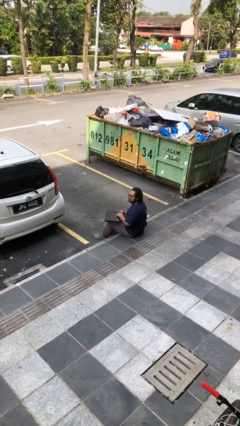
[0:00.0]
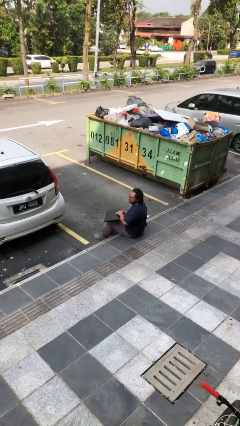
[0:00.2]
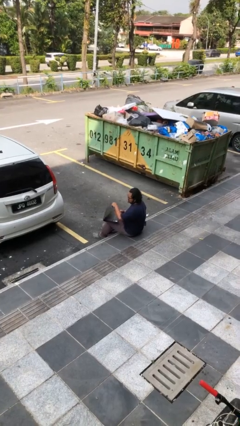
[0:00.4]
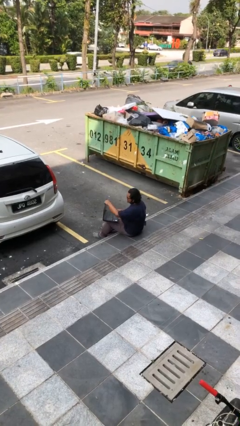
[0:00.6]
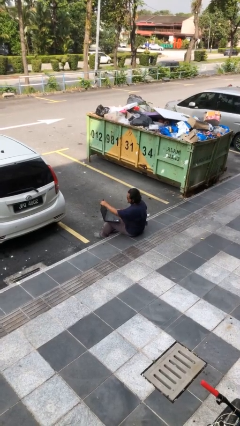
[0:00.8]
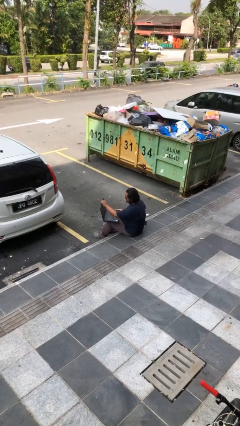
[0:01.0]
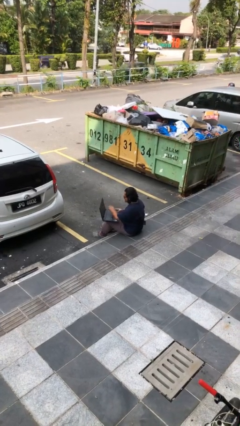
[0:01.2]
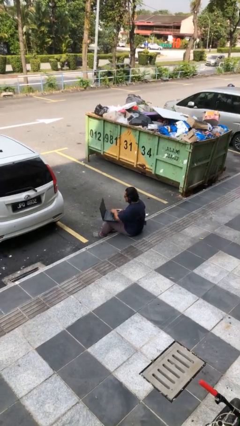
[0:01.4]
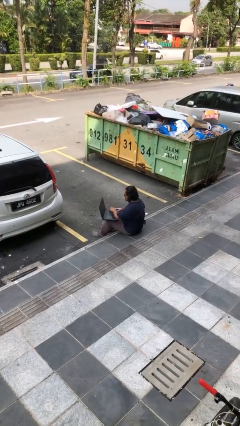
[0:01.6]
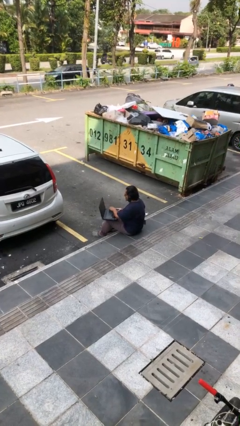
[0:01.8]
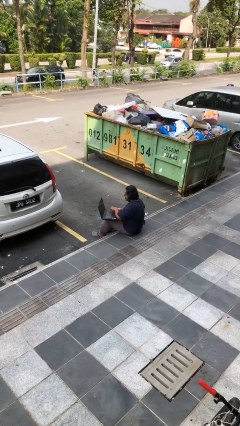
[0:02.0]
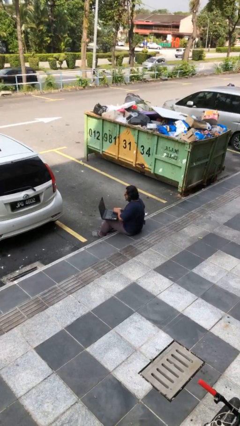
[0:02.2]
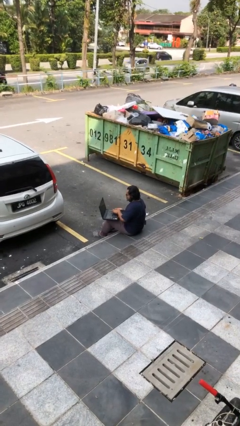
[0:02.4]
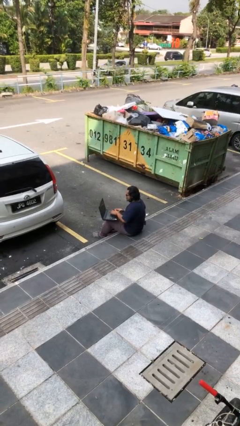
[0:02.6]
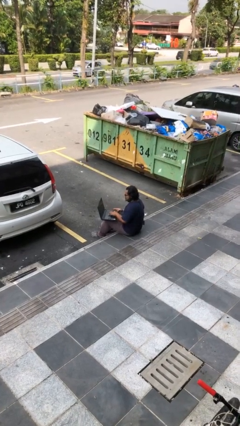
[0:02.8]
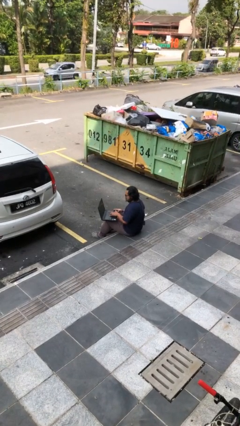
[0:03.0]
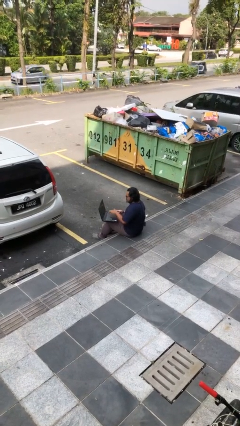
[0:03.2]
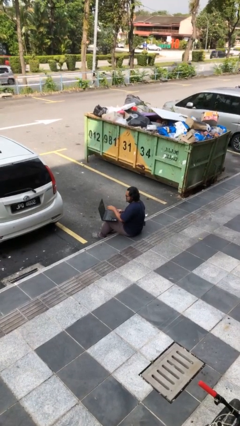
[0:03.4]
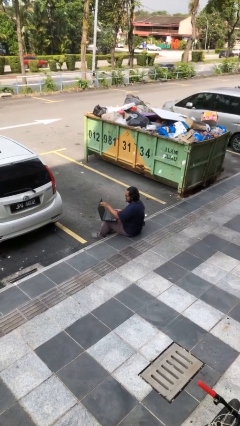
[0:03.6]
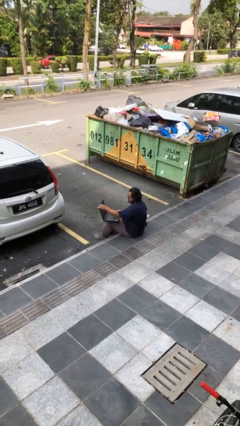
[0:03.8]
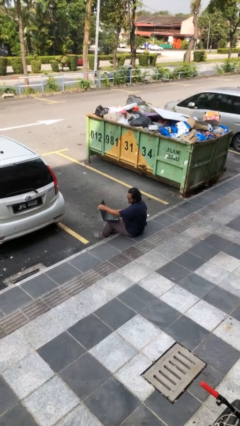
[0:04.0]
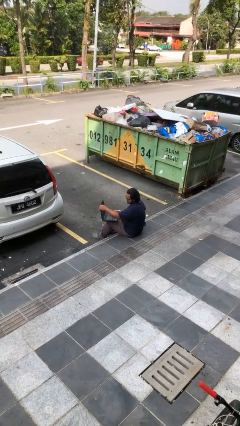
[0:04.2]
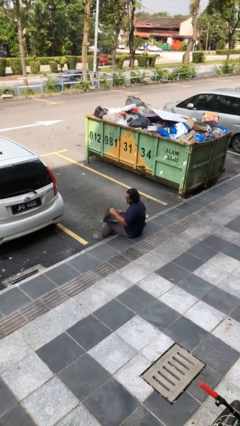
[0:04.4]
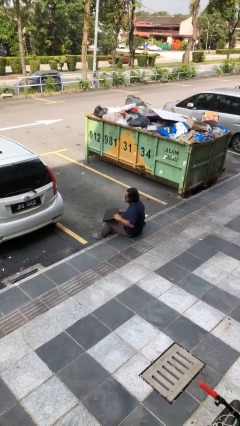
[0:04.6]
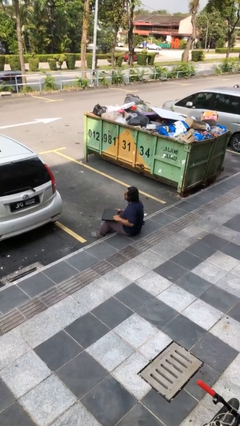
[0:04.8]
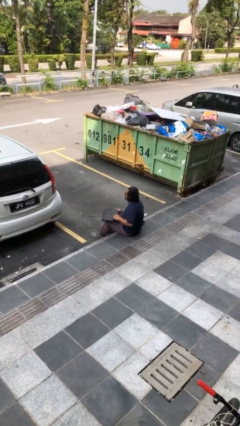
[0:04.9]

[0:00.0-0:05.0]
person interacts with laptop

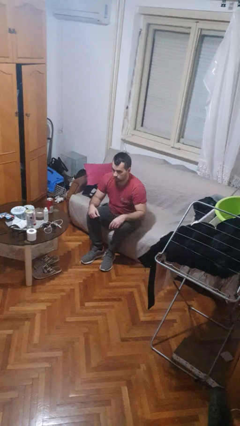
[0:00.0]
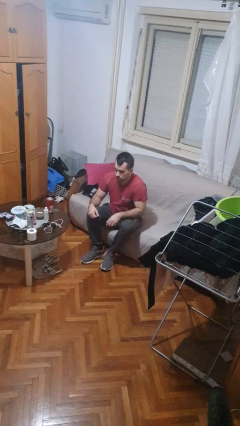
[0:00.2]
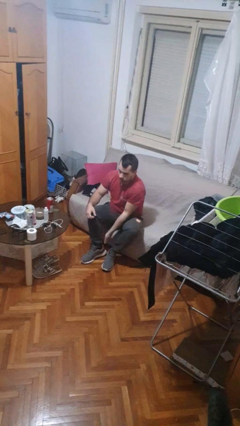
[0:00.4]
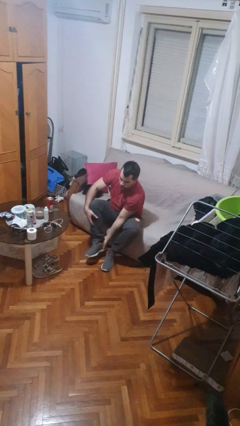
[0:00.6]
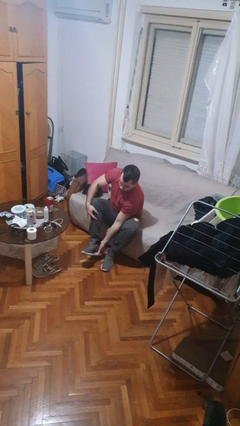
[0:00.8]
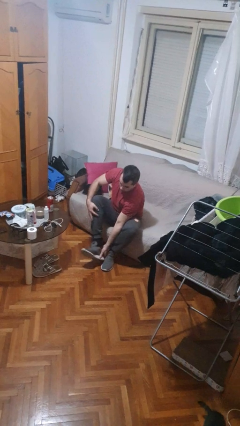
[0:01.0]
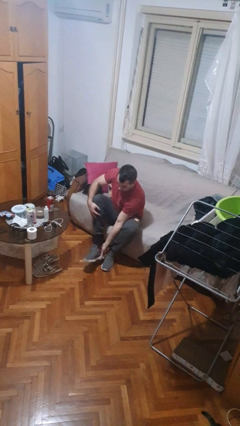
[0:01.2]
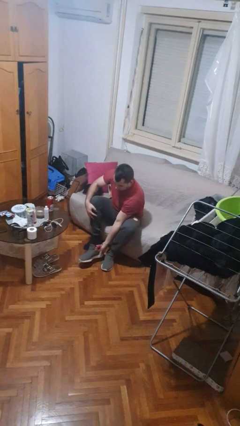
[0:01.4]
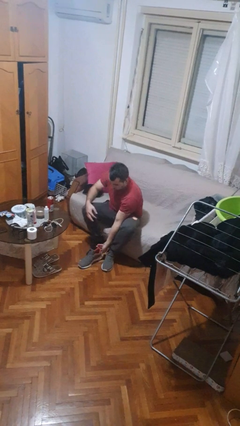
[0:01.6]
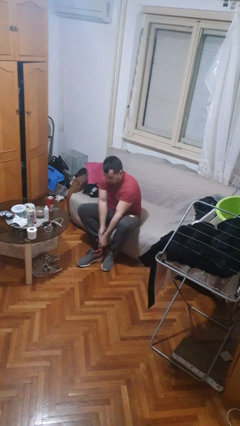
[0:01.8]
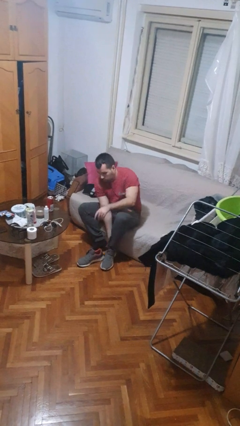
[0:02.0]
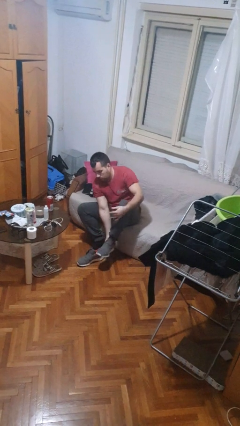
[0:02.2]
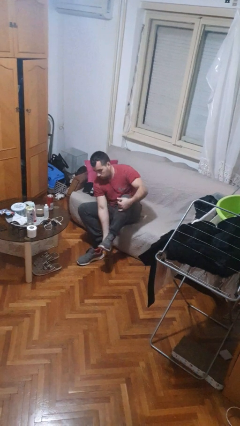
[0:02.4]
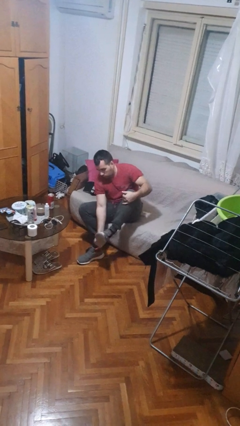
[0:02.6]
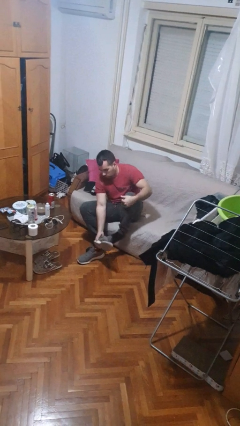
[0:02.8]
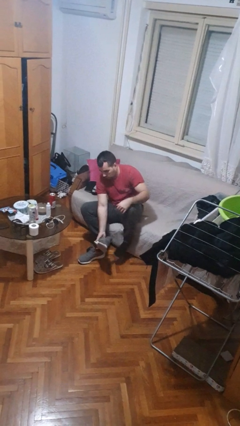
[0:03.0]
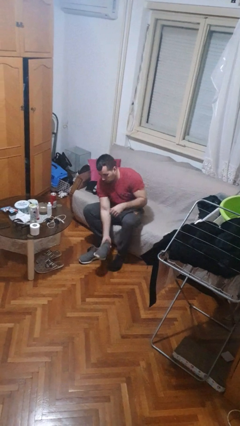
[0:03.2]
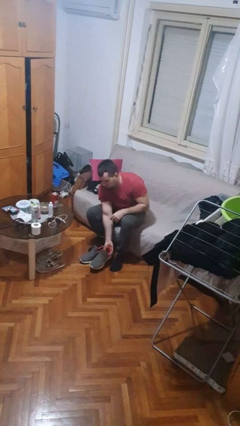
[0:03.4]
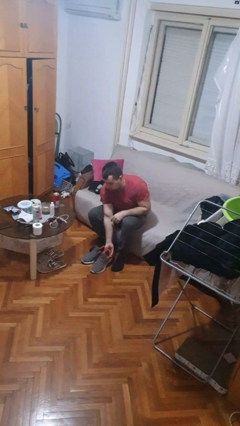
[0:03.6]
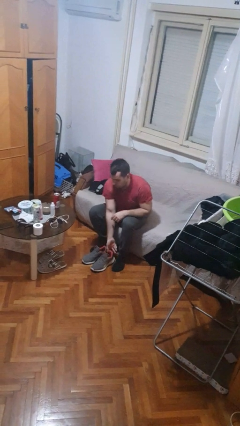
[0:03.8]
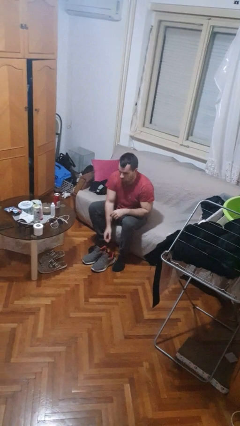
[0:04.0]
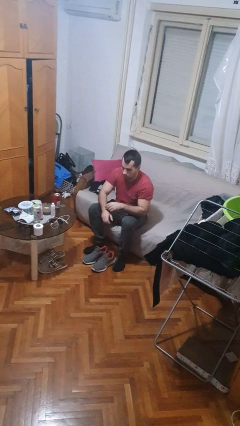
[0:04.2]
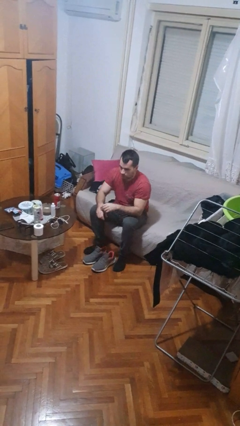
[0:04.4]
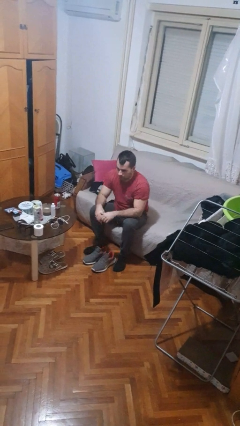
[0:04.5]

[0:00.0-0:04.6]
person takes off shoes

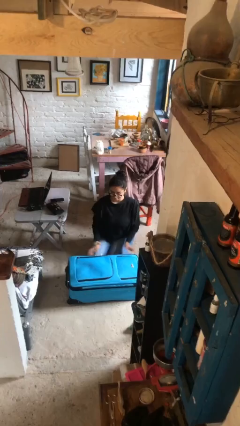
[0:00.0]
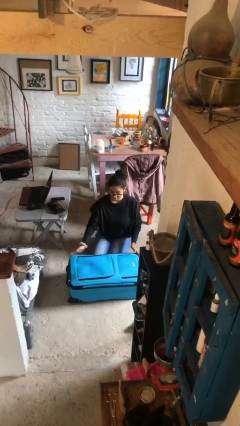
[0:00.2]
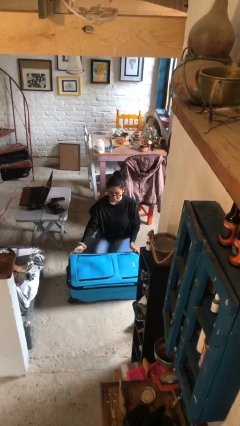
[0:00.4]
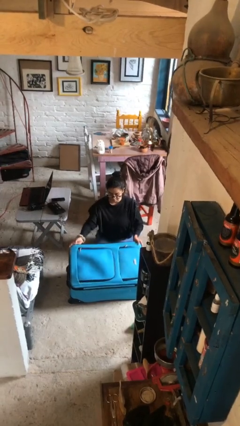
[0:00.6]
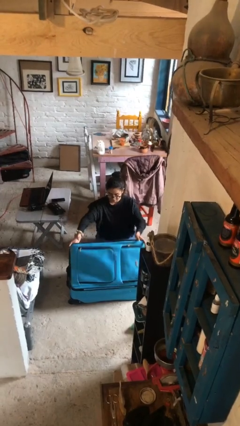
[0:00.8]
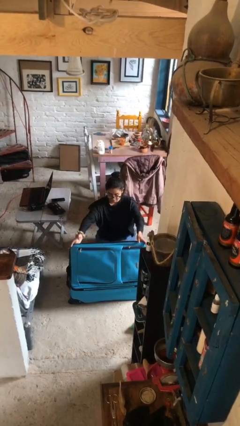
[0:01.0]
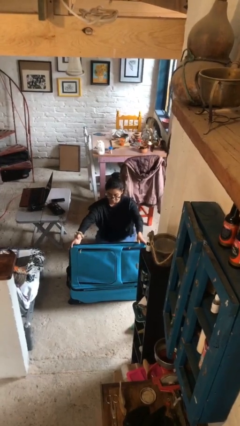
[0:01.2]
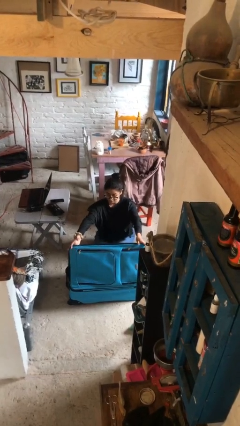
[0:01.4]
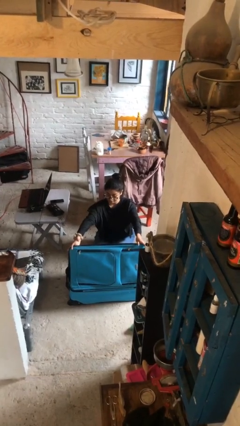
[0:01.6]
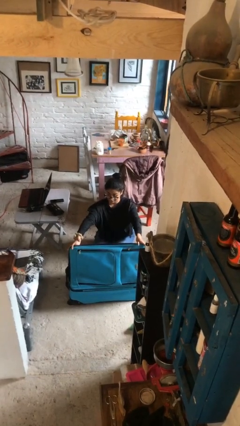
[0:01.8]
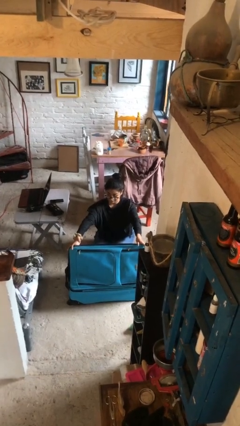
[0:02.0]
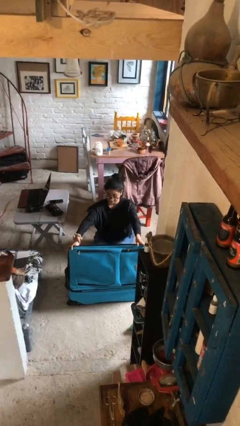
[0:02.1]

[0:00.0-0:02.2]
person opens suitcase

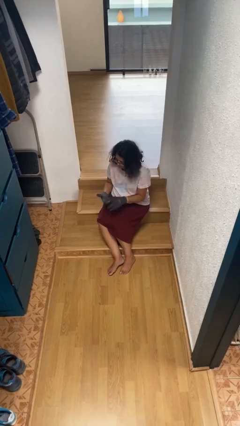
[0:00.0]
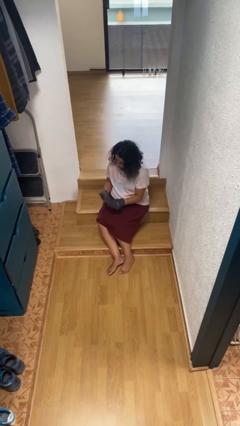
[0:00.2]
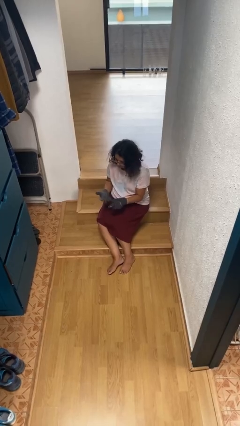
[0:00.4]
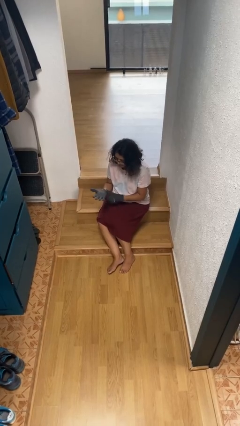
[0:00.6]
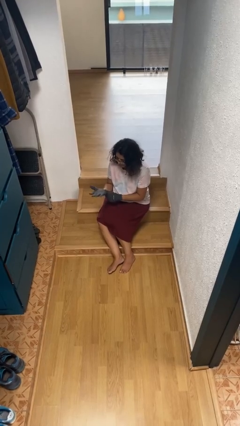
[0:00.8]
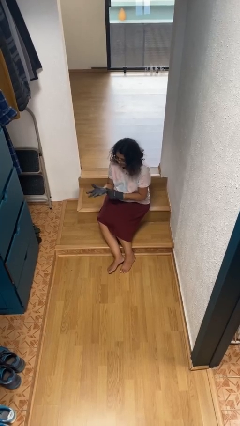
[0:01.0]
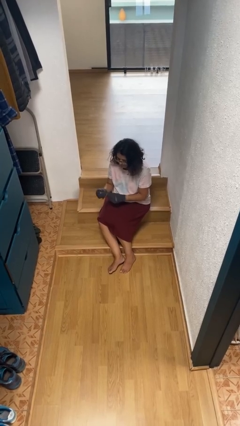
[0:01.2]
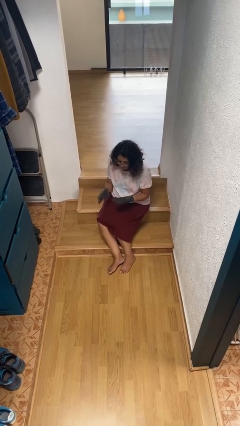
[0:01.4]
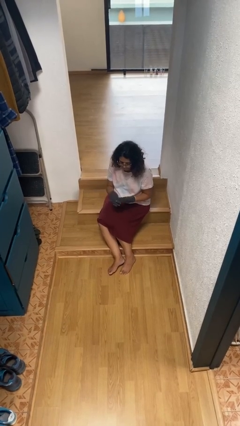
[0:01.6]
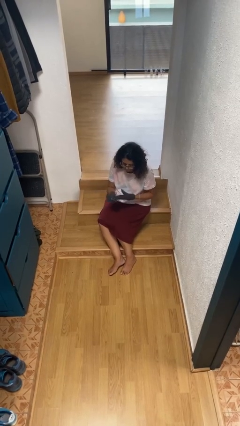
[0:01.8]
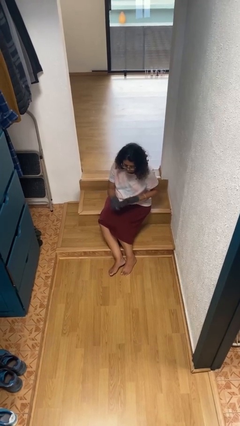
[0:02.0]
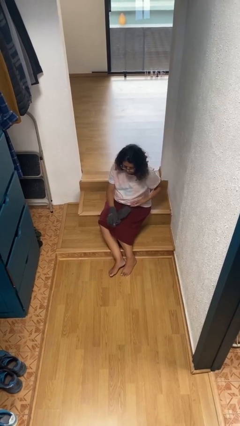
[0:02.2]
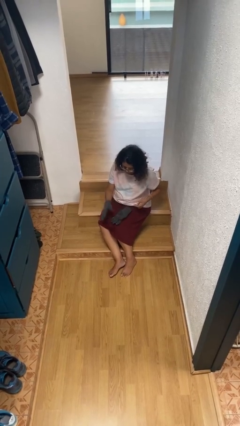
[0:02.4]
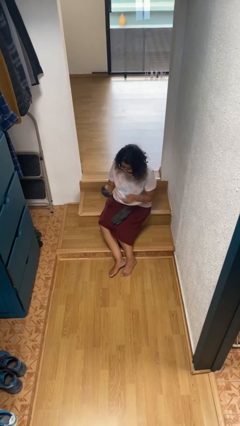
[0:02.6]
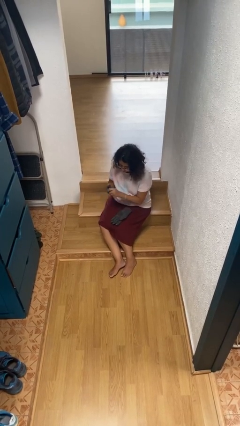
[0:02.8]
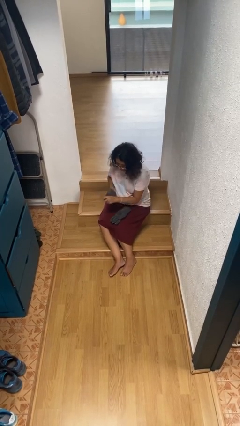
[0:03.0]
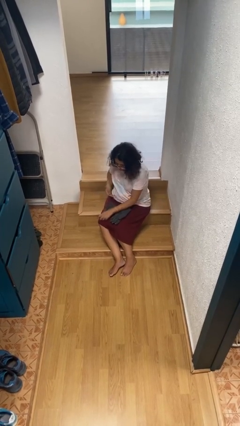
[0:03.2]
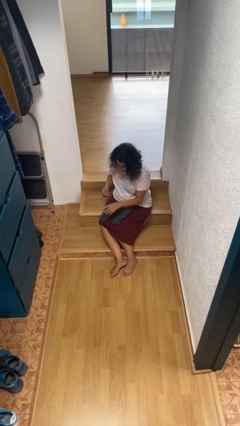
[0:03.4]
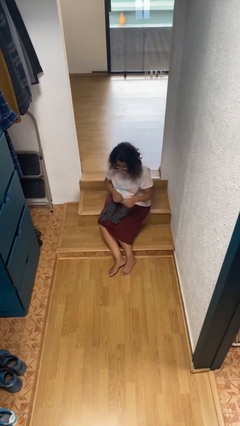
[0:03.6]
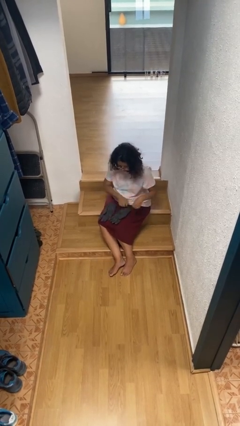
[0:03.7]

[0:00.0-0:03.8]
person takes off gloves

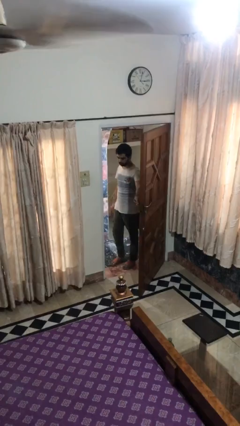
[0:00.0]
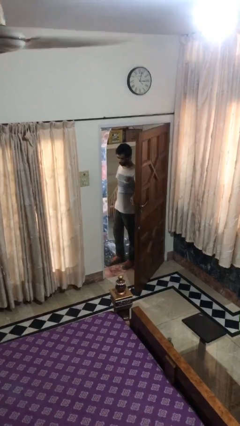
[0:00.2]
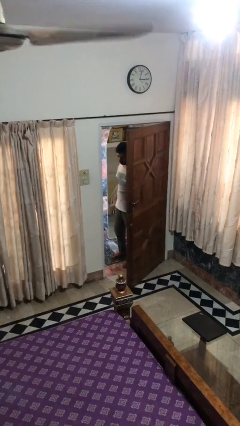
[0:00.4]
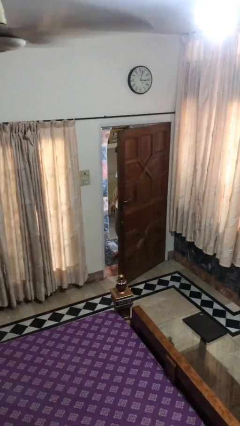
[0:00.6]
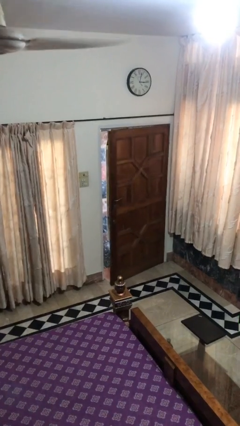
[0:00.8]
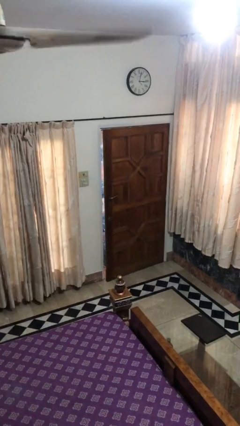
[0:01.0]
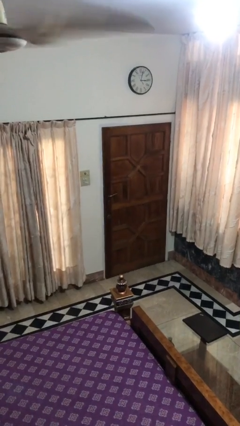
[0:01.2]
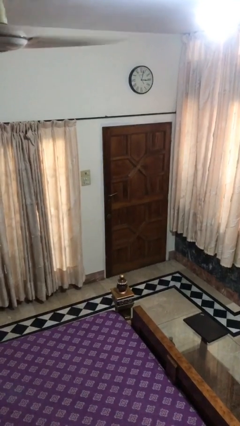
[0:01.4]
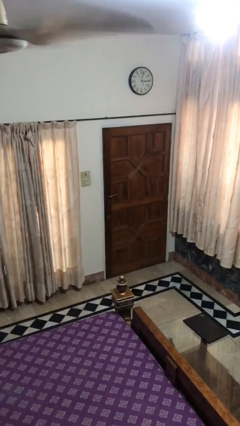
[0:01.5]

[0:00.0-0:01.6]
person closes facility door
